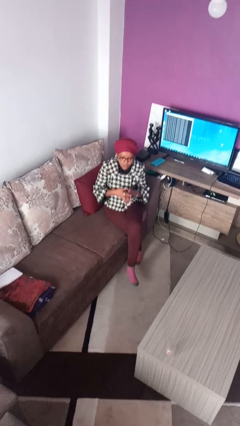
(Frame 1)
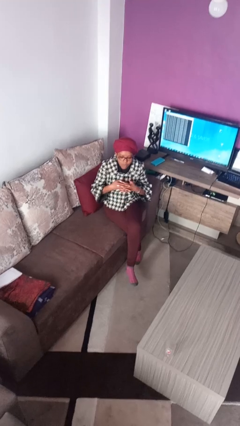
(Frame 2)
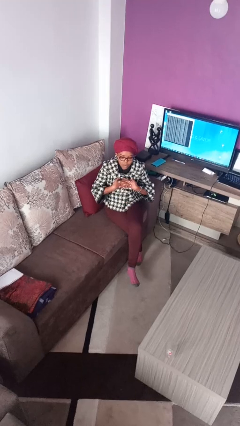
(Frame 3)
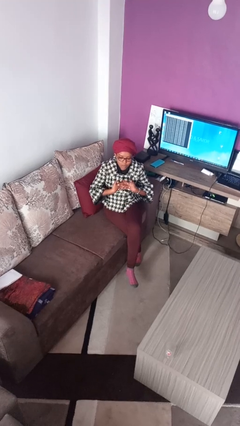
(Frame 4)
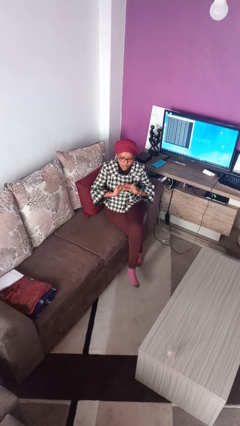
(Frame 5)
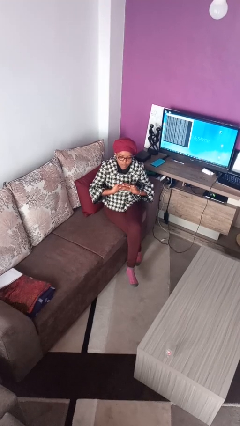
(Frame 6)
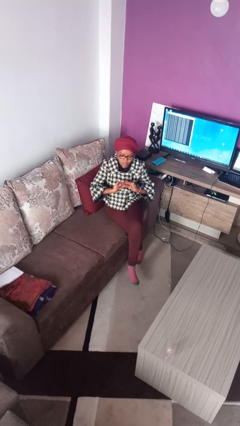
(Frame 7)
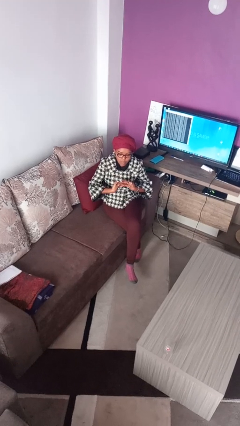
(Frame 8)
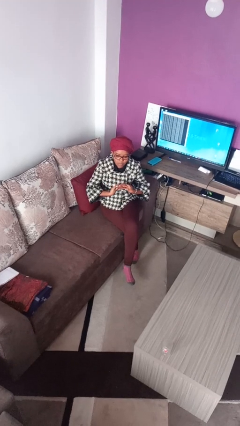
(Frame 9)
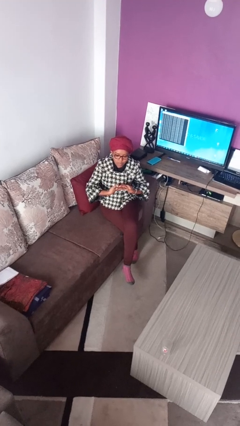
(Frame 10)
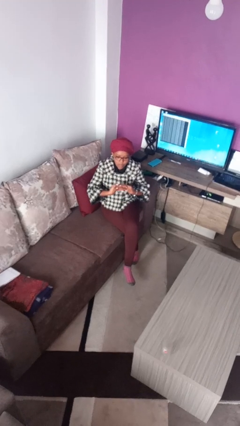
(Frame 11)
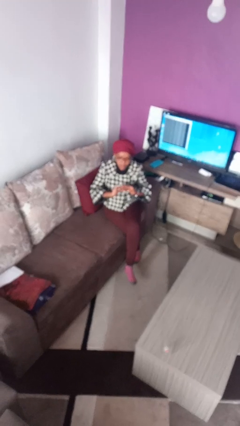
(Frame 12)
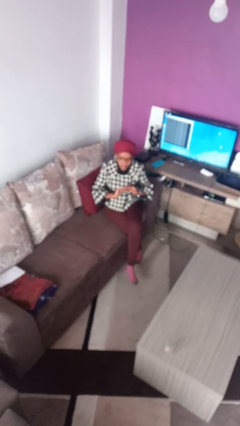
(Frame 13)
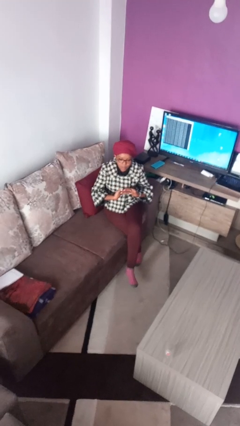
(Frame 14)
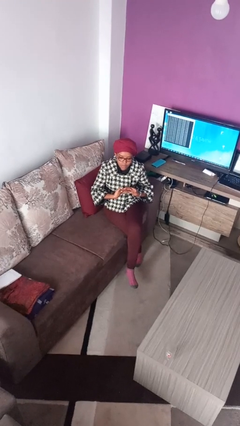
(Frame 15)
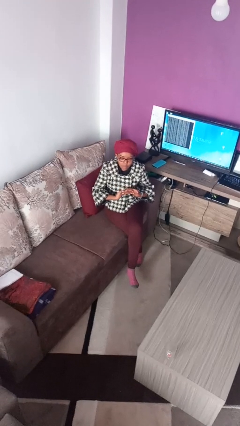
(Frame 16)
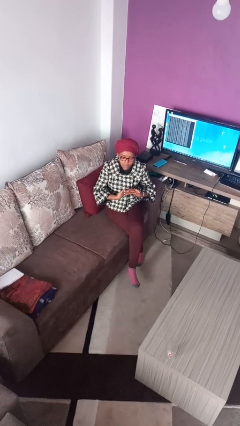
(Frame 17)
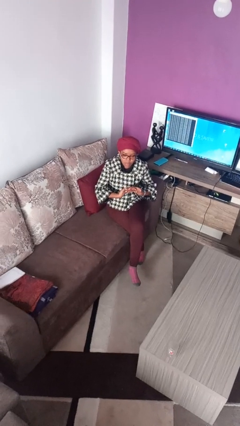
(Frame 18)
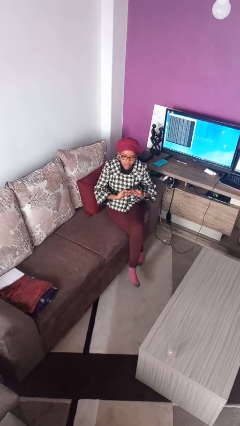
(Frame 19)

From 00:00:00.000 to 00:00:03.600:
person cracks knuckles

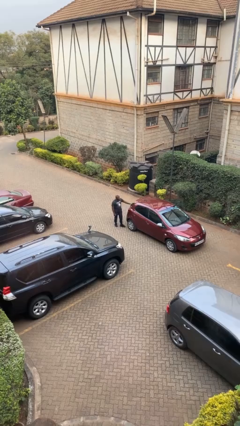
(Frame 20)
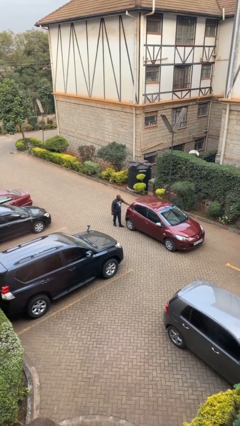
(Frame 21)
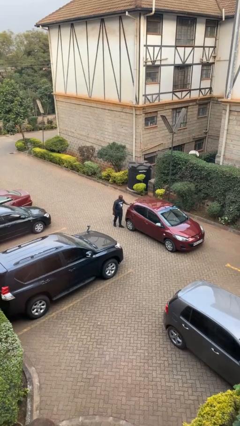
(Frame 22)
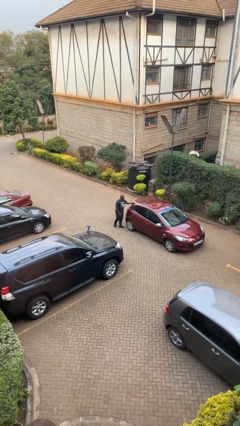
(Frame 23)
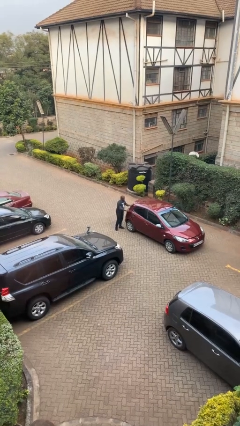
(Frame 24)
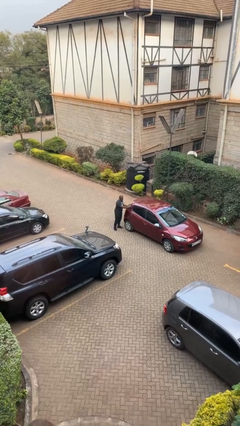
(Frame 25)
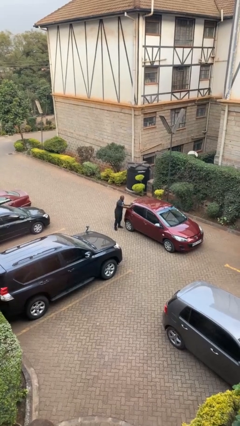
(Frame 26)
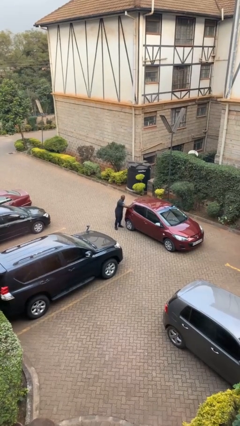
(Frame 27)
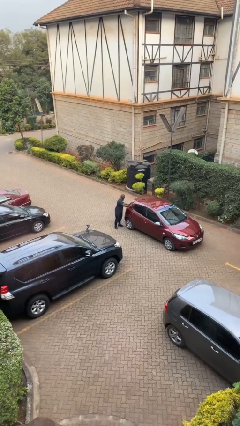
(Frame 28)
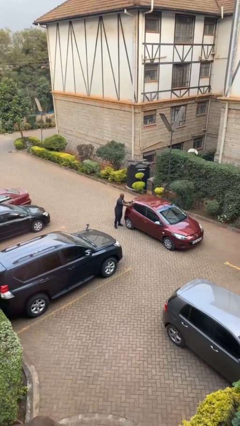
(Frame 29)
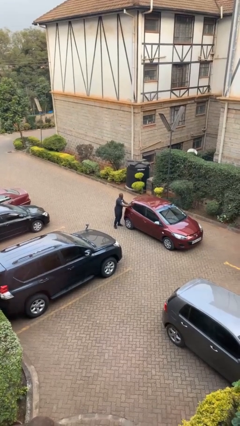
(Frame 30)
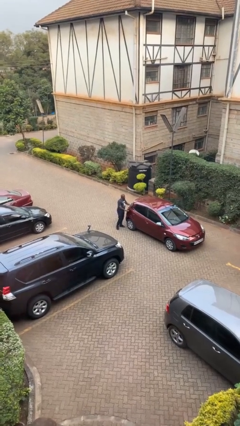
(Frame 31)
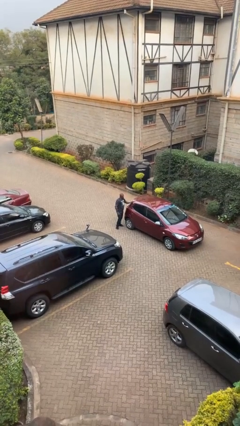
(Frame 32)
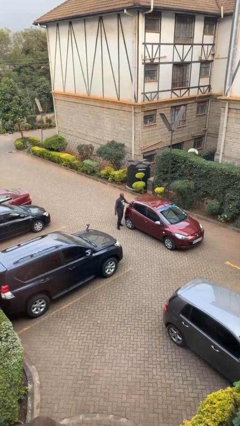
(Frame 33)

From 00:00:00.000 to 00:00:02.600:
person polishes car with rag

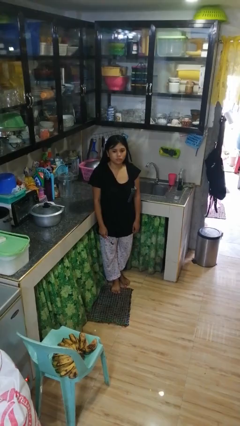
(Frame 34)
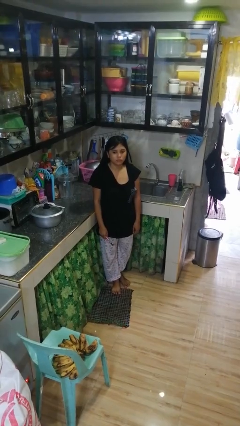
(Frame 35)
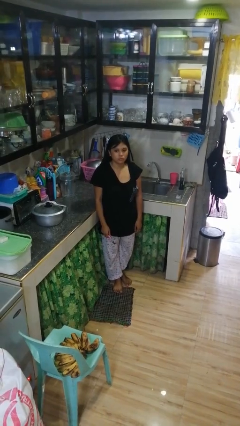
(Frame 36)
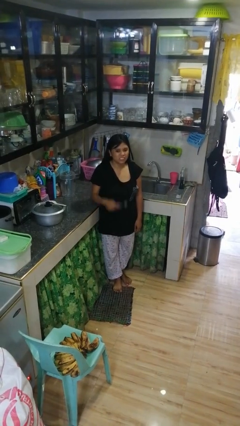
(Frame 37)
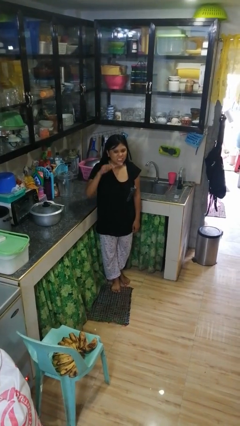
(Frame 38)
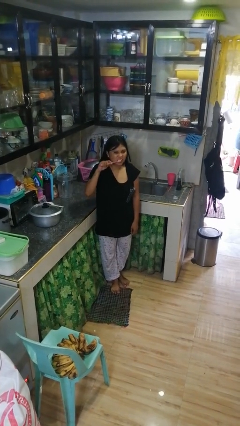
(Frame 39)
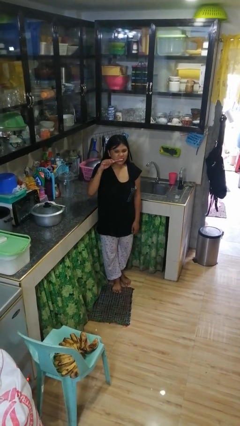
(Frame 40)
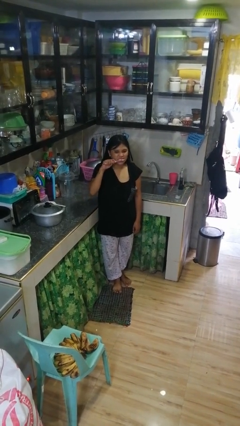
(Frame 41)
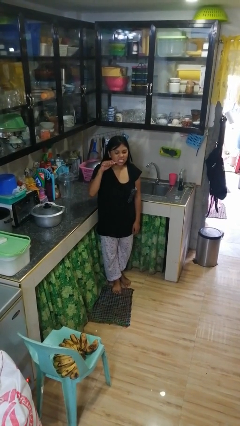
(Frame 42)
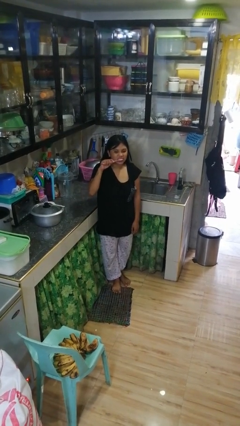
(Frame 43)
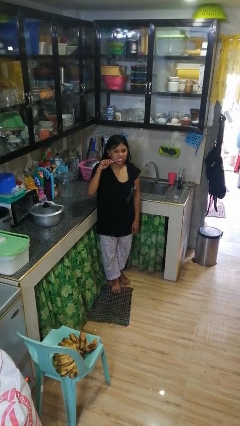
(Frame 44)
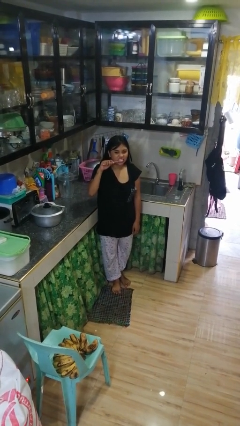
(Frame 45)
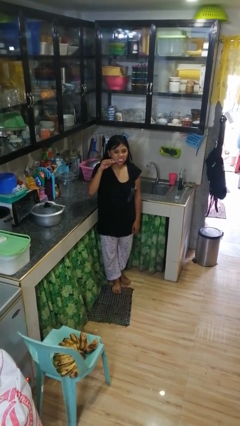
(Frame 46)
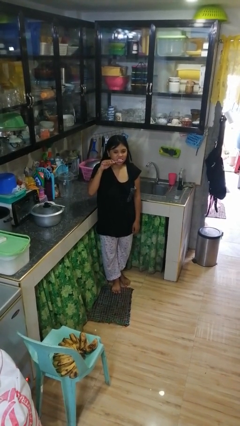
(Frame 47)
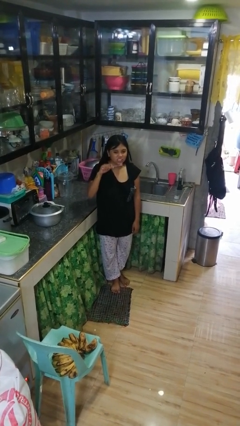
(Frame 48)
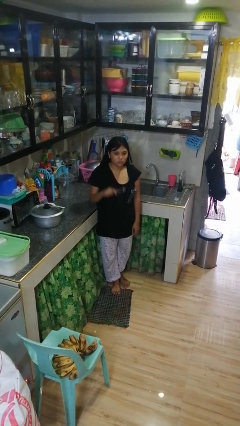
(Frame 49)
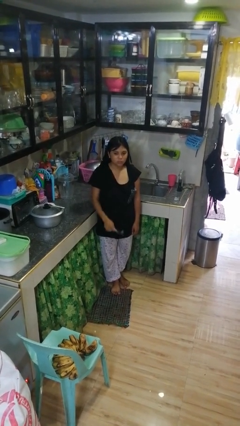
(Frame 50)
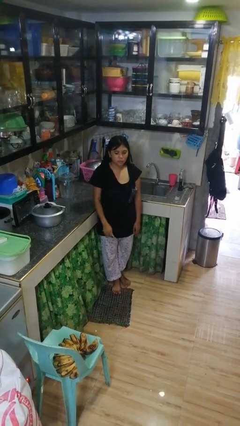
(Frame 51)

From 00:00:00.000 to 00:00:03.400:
person brushes teeth

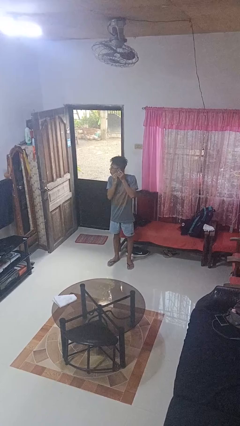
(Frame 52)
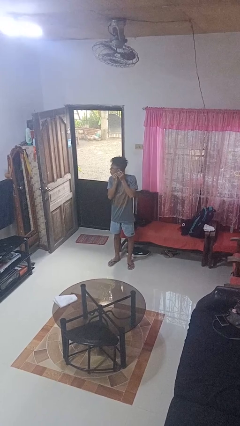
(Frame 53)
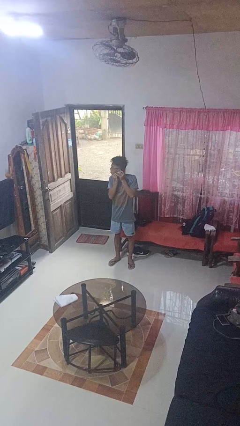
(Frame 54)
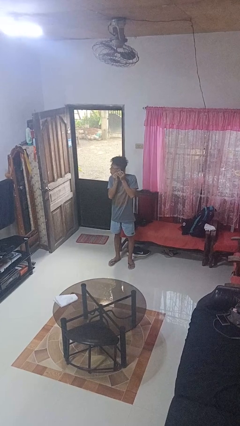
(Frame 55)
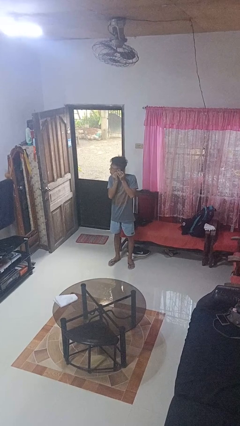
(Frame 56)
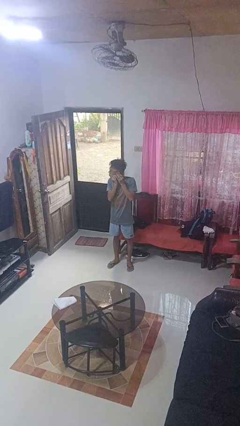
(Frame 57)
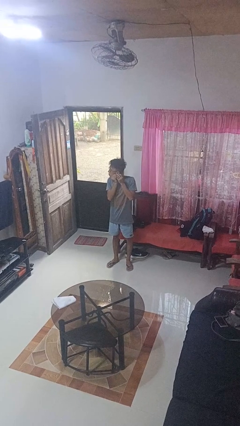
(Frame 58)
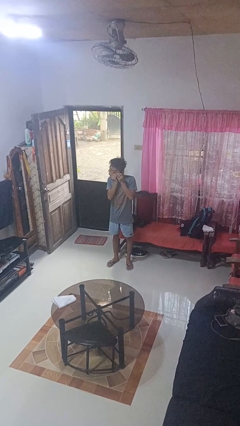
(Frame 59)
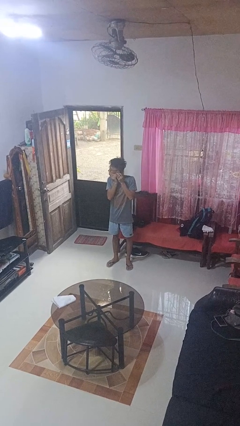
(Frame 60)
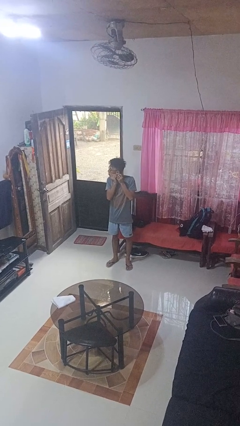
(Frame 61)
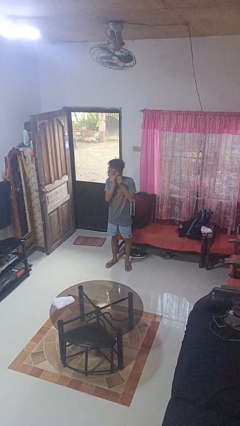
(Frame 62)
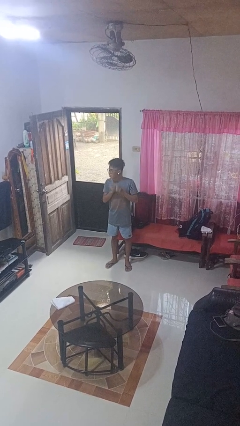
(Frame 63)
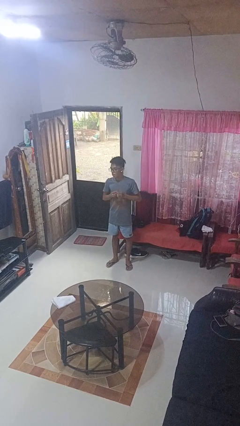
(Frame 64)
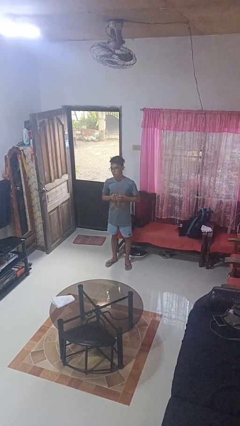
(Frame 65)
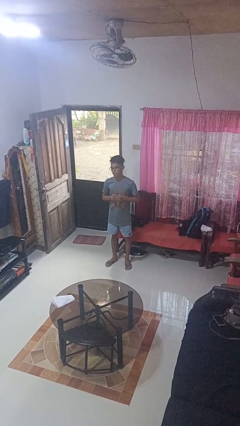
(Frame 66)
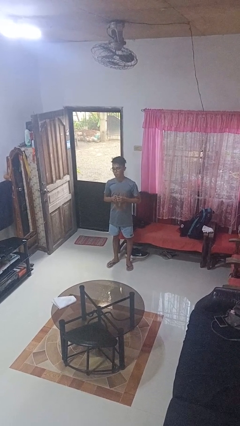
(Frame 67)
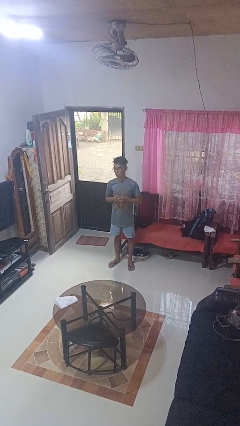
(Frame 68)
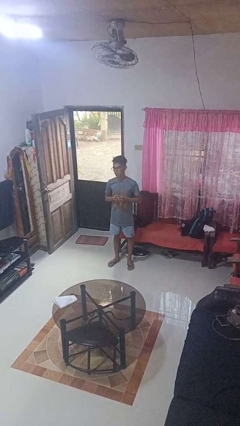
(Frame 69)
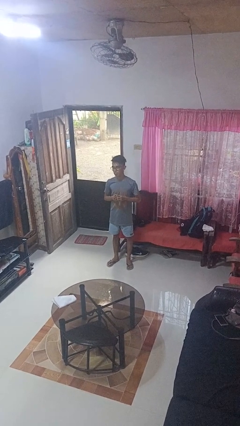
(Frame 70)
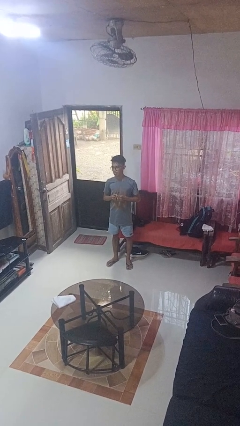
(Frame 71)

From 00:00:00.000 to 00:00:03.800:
person puts on earrings

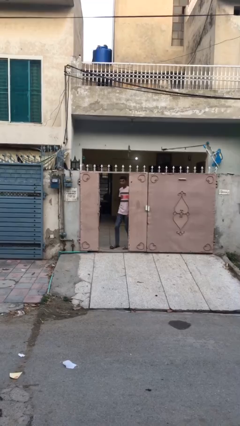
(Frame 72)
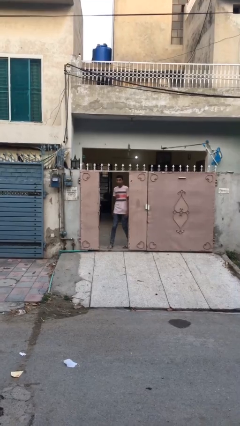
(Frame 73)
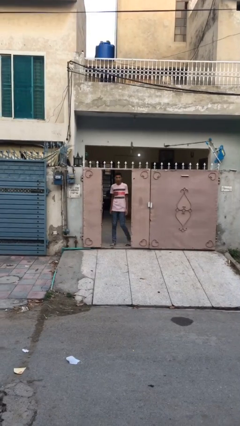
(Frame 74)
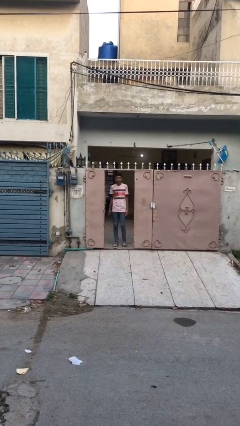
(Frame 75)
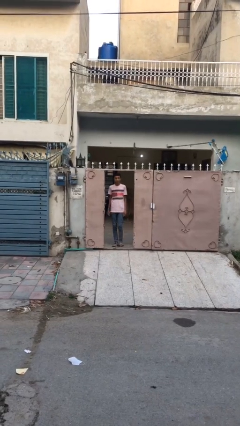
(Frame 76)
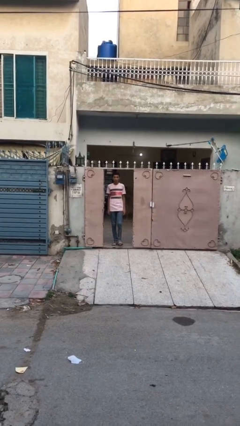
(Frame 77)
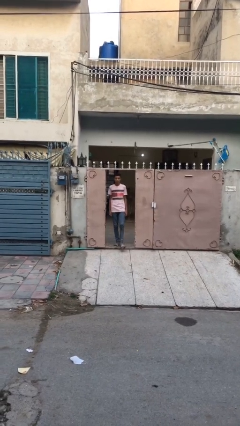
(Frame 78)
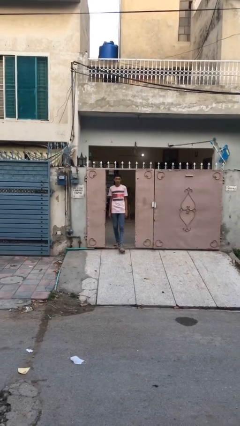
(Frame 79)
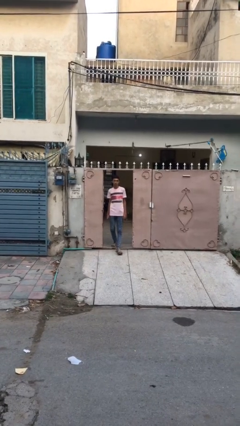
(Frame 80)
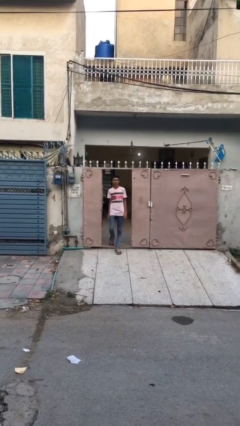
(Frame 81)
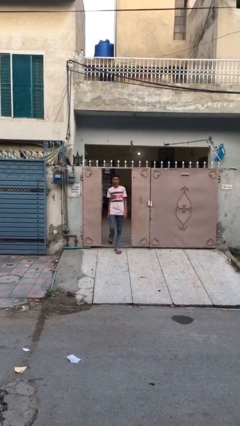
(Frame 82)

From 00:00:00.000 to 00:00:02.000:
person enters scene through structure

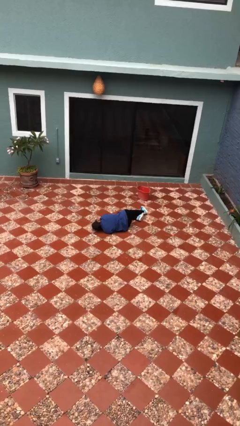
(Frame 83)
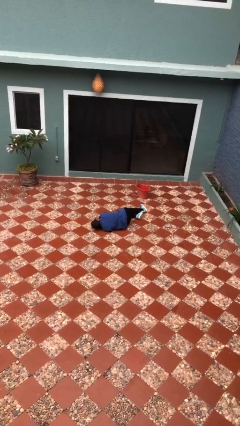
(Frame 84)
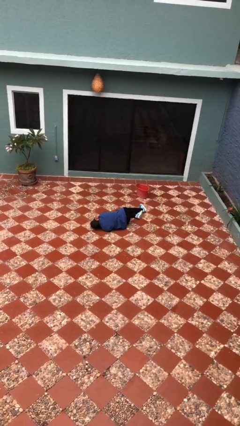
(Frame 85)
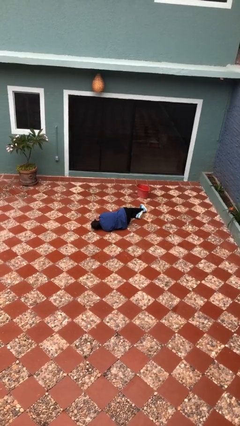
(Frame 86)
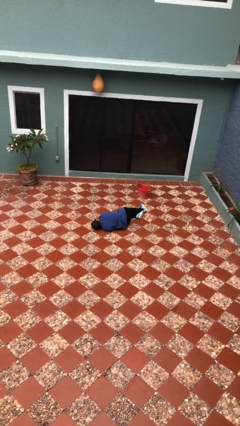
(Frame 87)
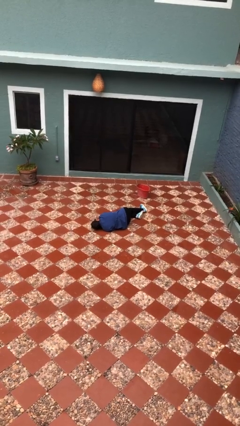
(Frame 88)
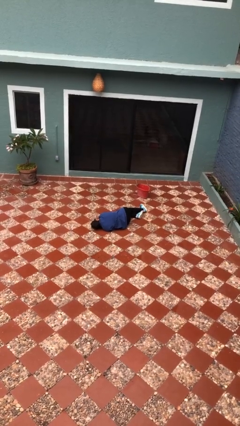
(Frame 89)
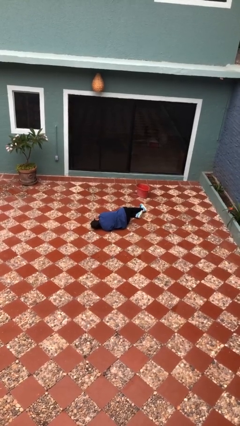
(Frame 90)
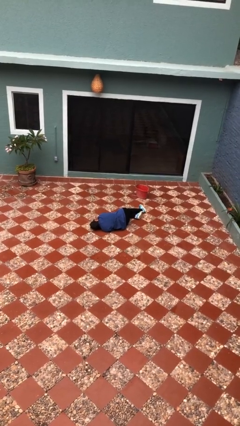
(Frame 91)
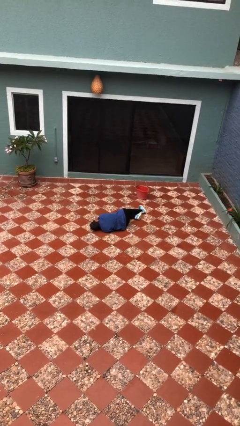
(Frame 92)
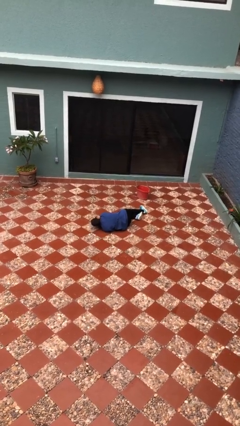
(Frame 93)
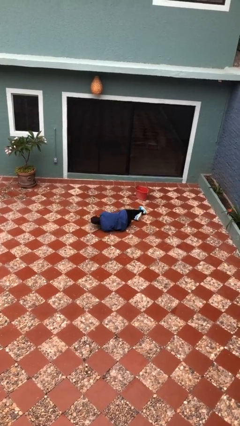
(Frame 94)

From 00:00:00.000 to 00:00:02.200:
person lies down on floor
